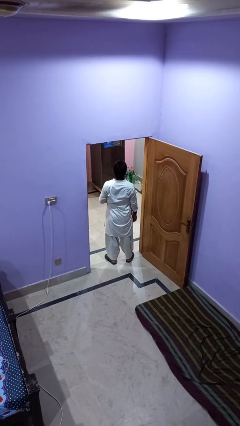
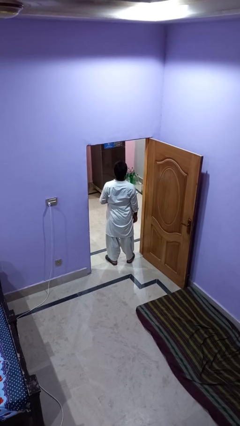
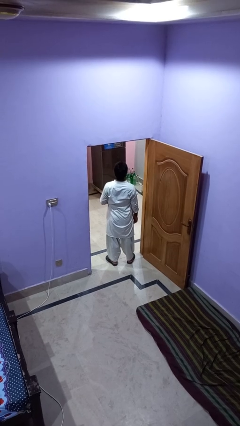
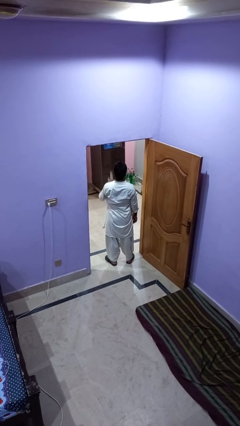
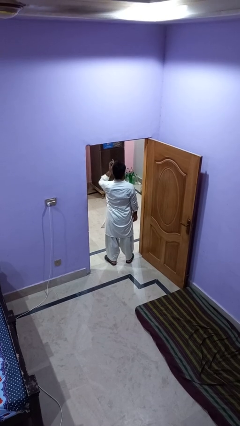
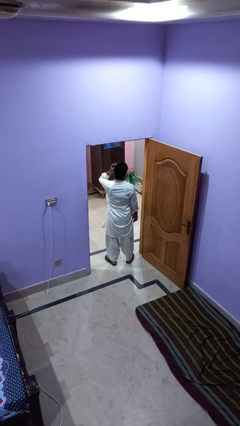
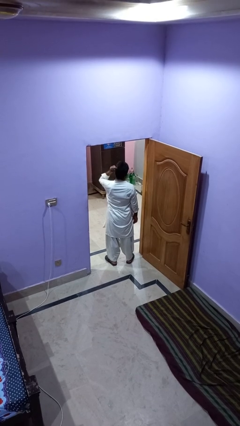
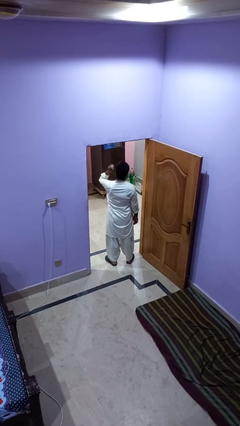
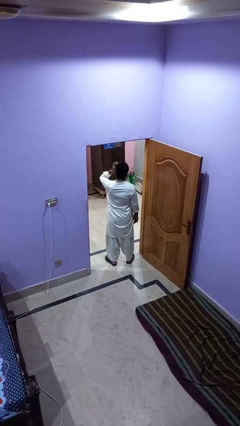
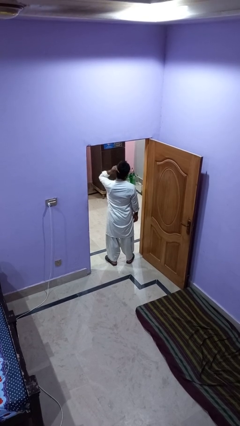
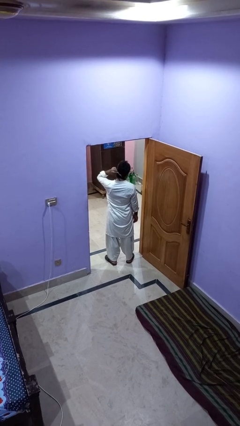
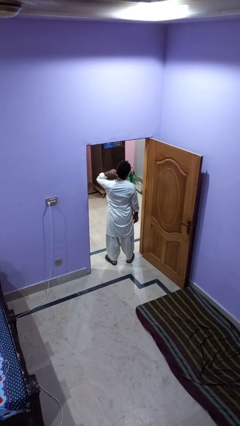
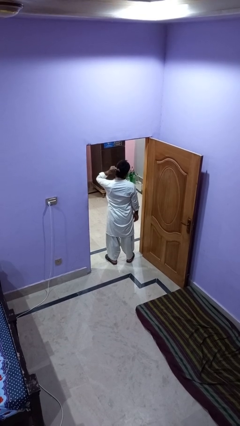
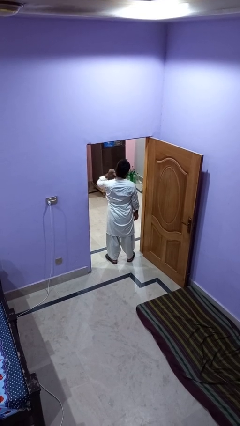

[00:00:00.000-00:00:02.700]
person brushes hair

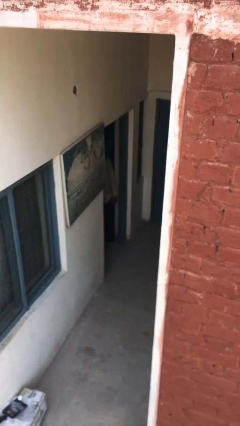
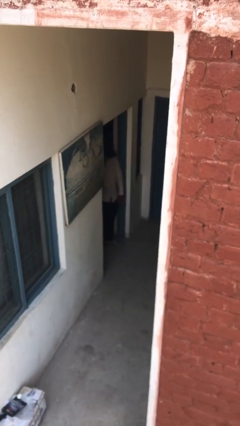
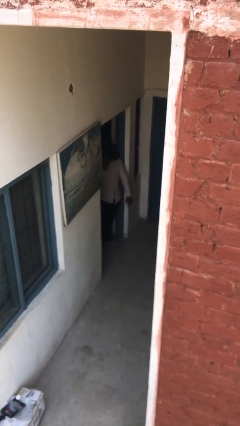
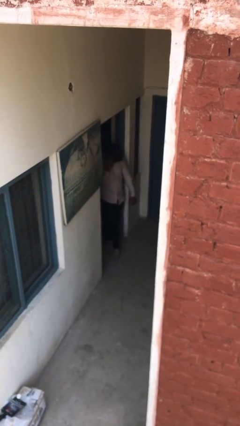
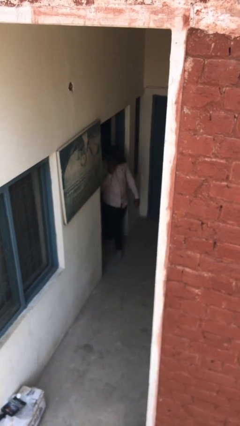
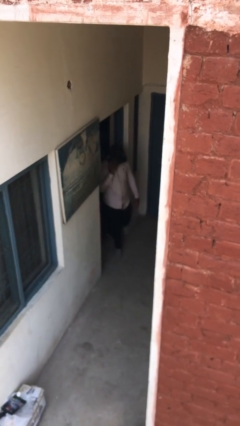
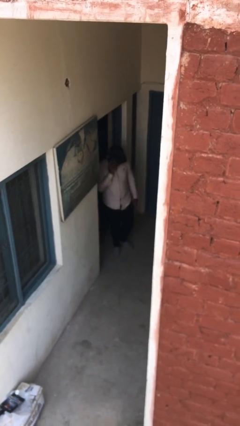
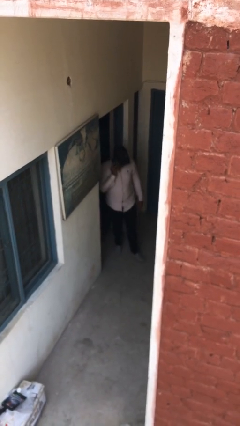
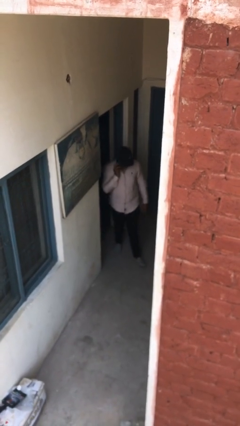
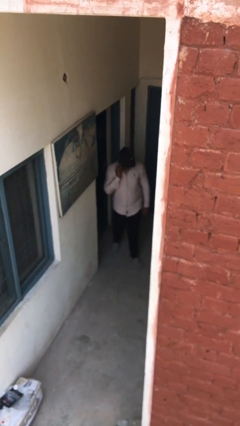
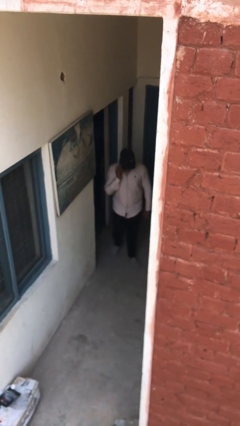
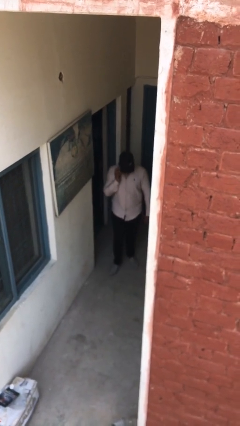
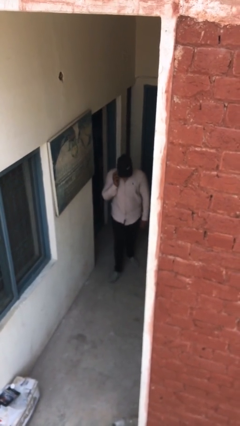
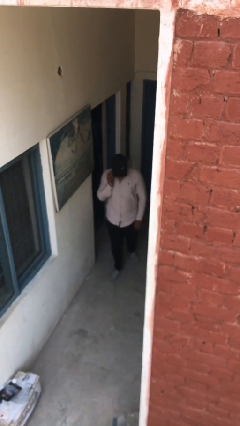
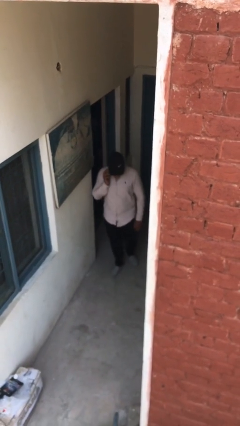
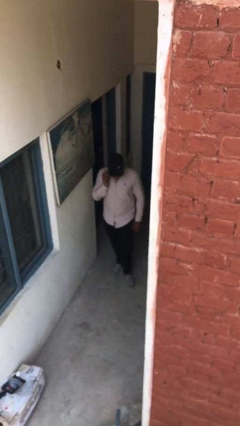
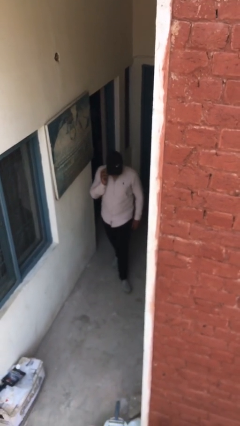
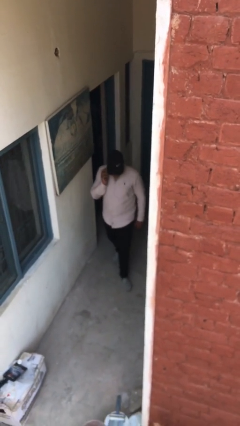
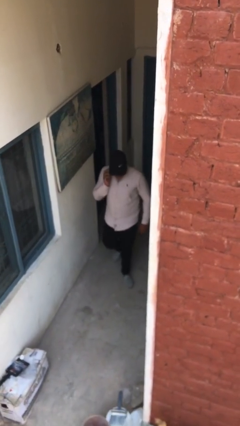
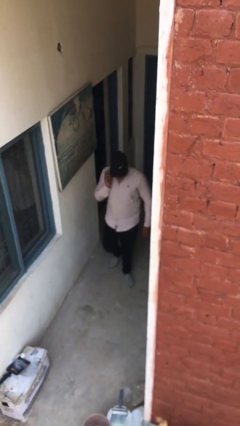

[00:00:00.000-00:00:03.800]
person enters scene through structure

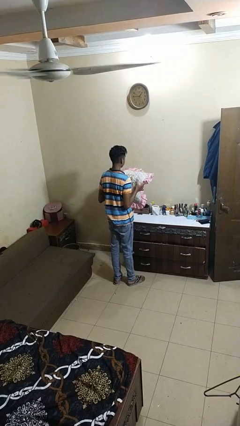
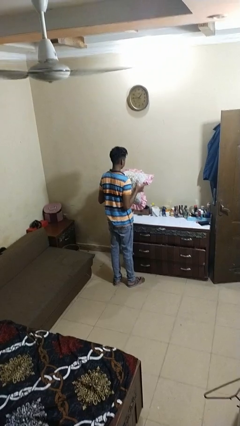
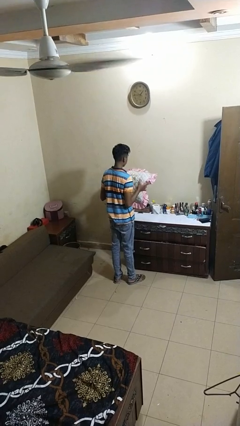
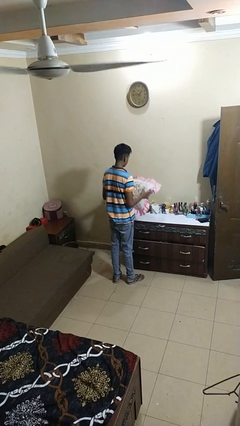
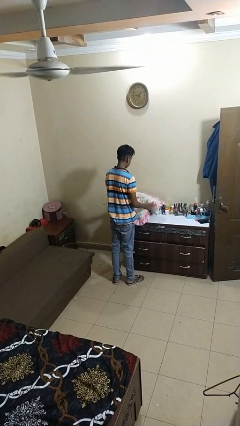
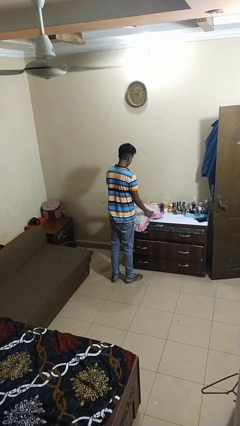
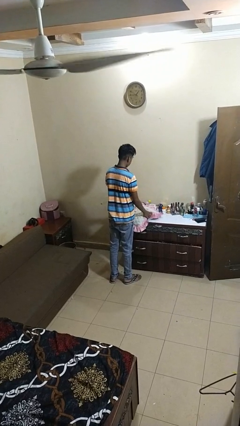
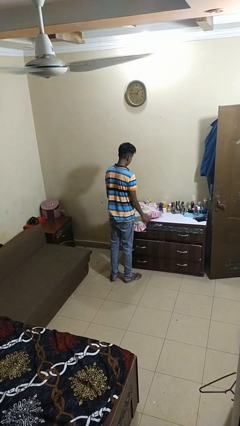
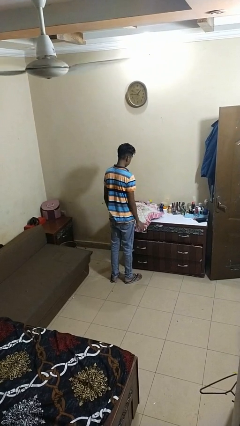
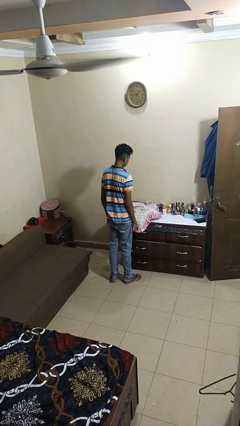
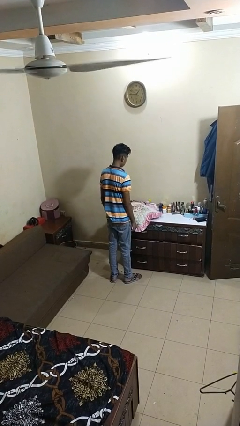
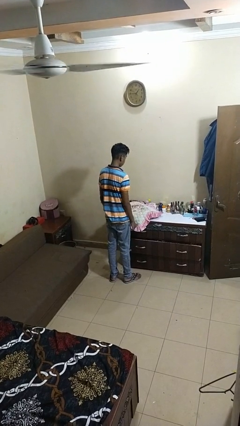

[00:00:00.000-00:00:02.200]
person puts down object on countertop

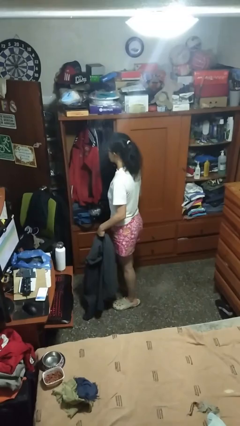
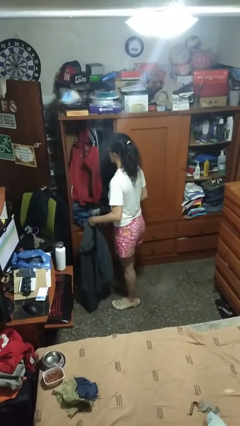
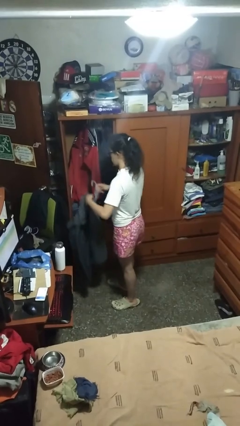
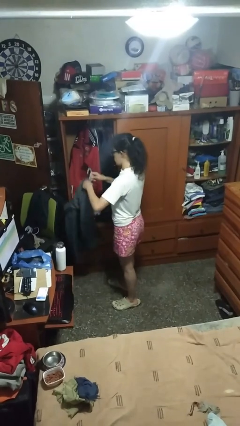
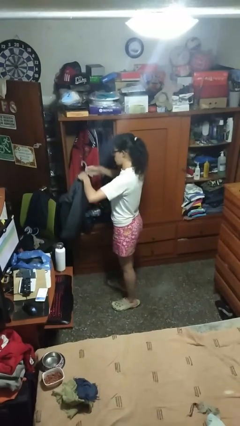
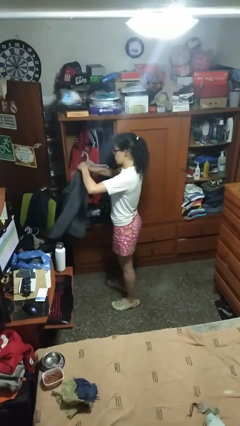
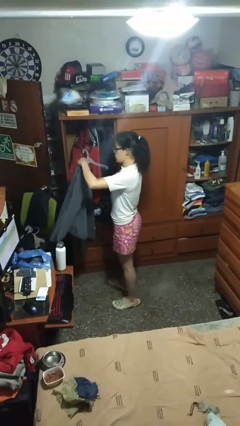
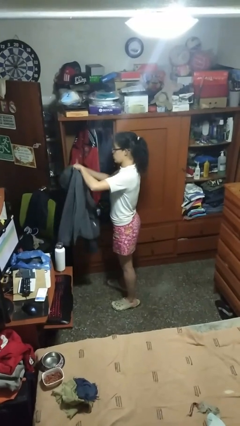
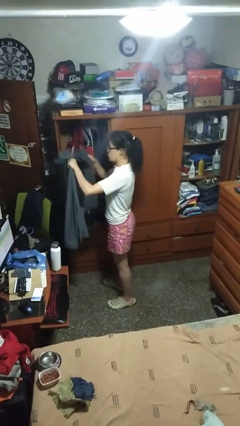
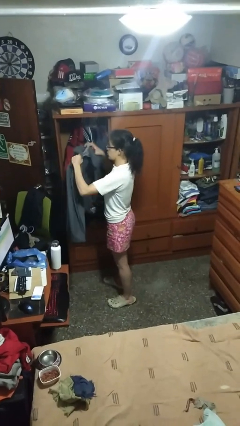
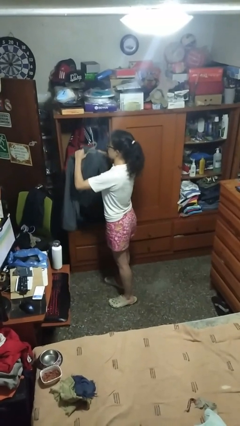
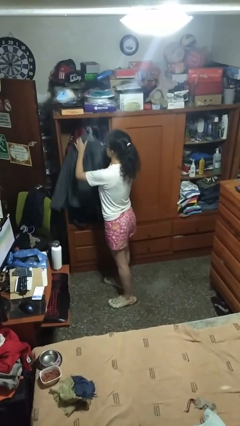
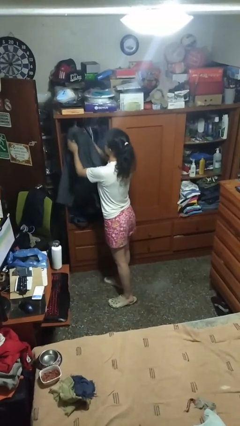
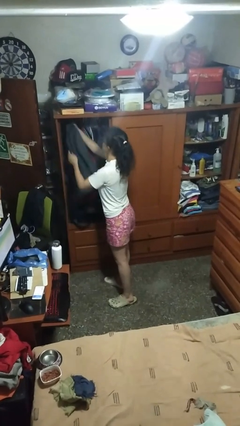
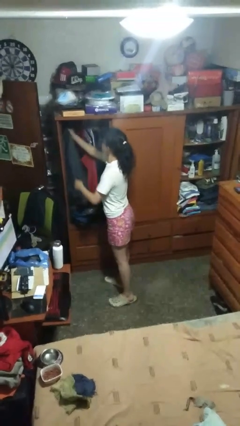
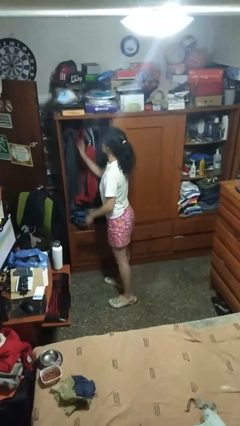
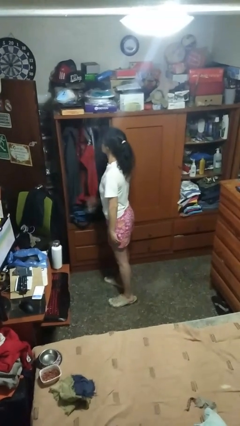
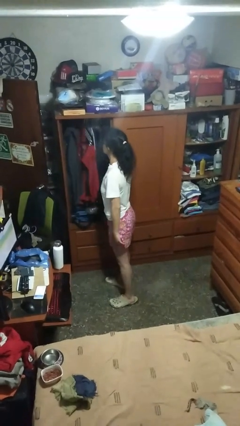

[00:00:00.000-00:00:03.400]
person puts clothes into closet

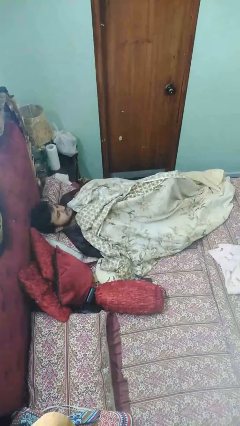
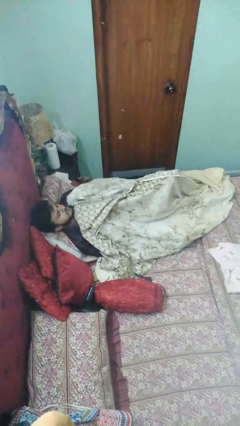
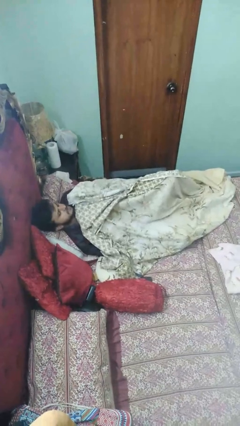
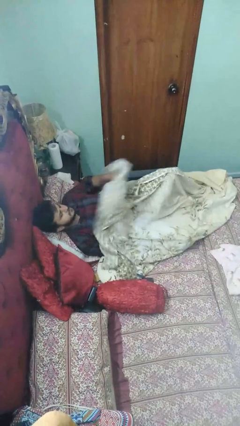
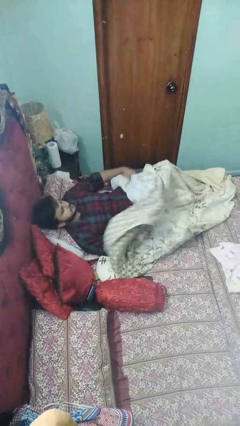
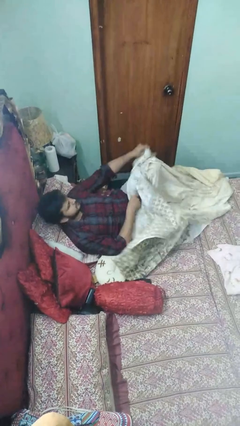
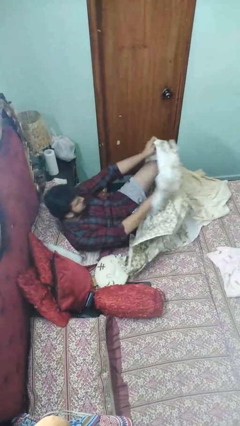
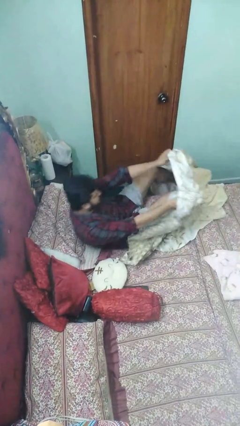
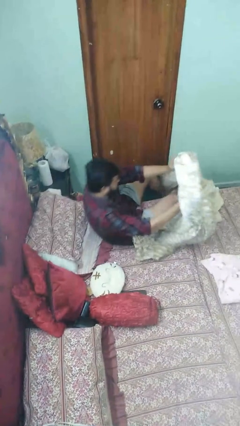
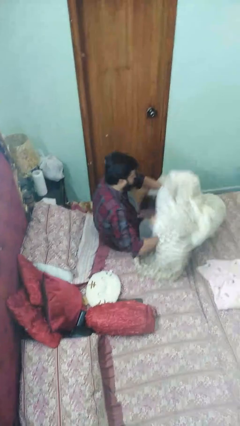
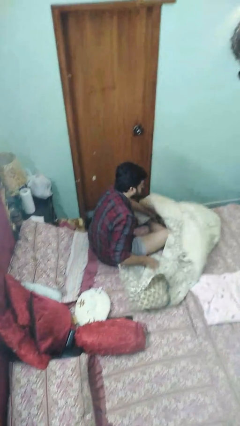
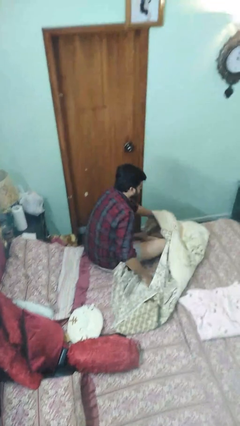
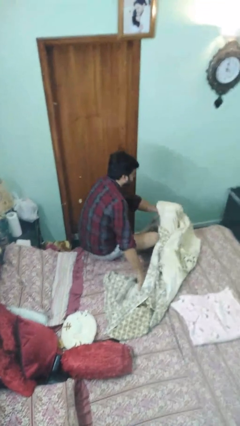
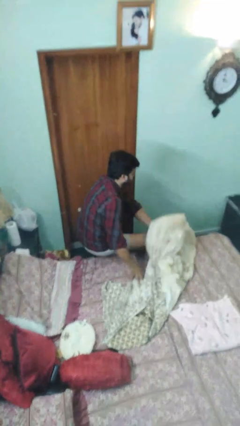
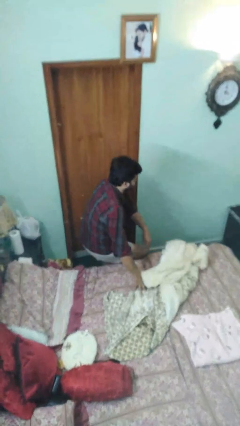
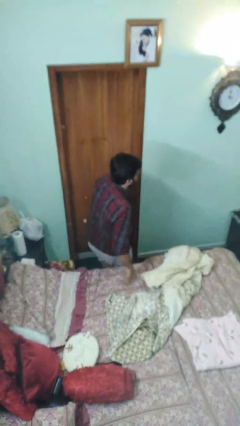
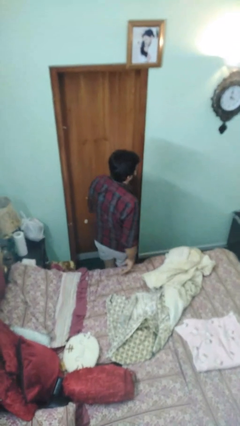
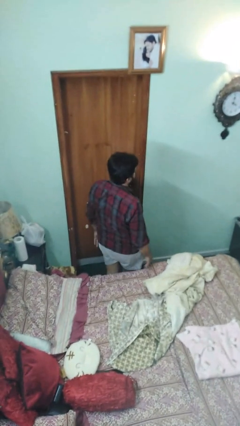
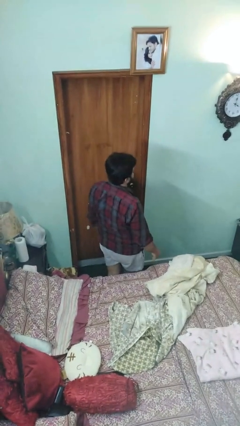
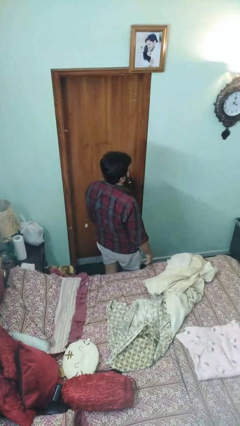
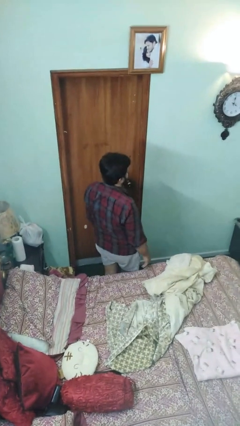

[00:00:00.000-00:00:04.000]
person uncovers with bedsheets

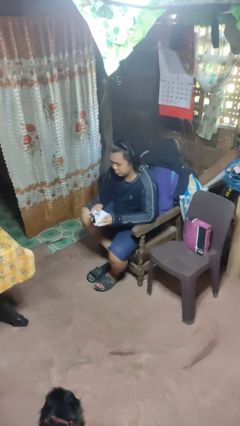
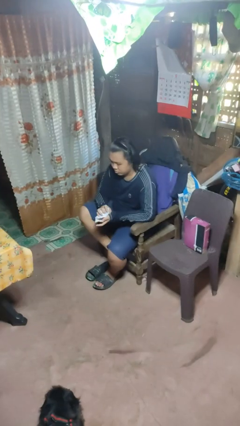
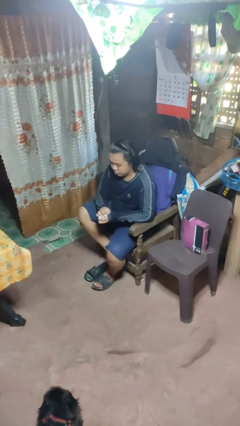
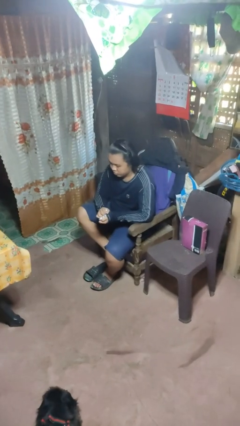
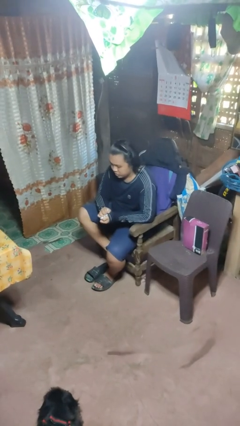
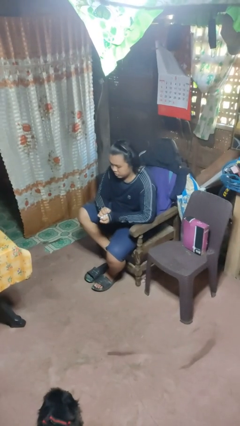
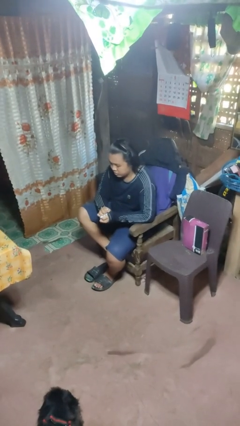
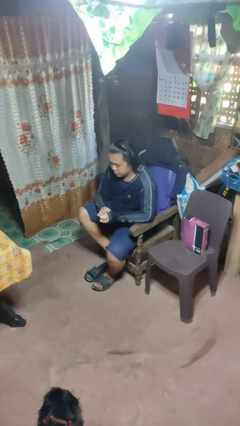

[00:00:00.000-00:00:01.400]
person crumples paper
